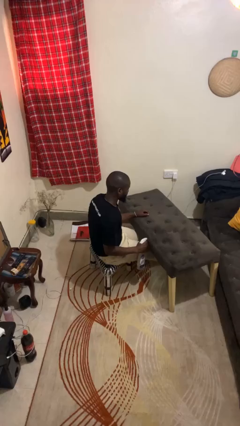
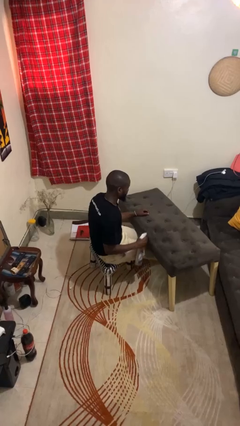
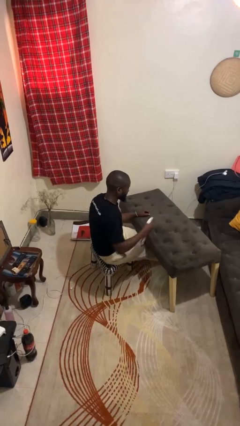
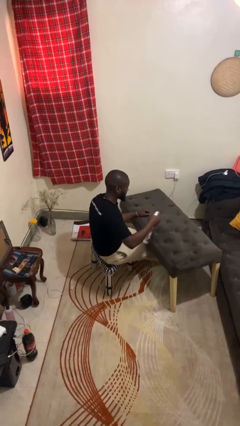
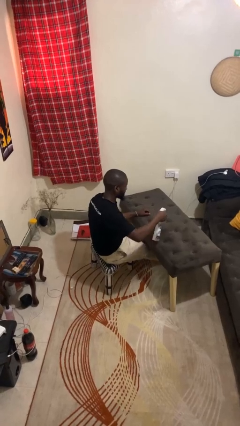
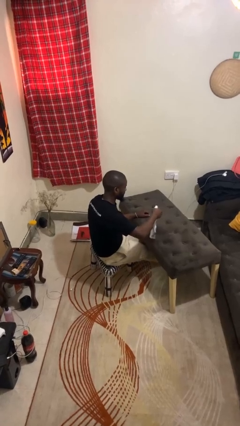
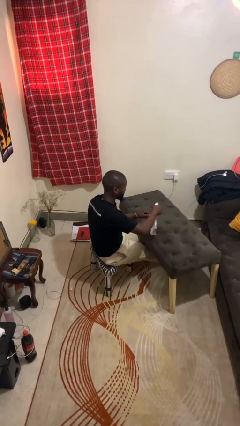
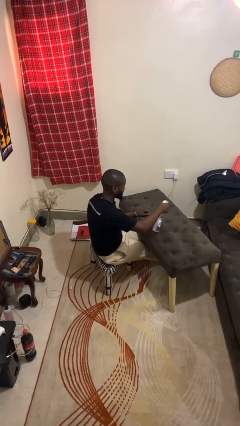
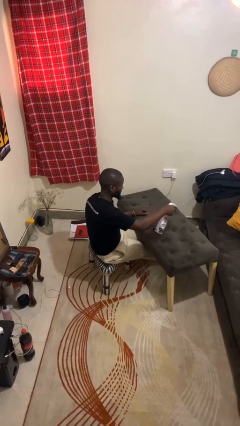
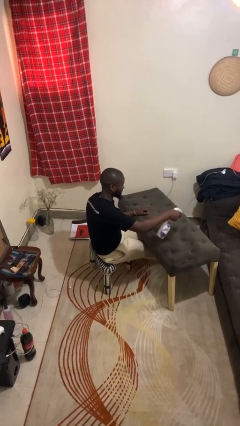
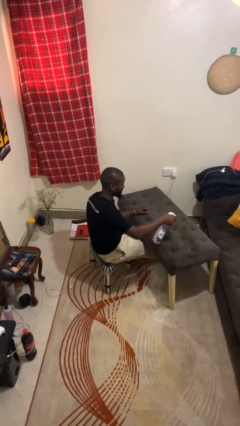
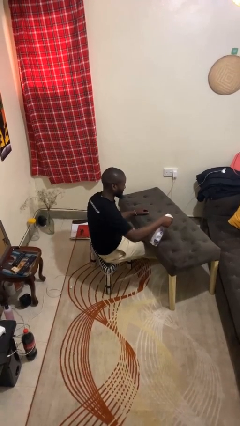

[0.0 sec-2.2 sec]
person sprays from bottle

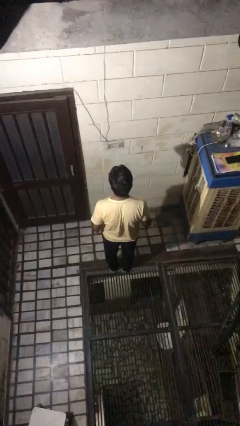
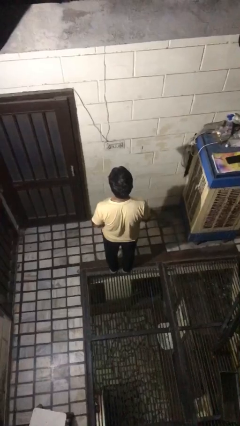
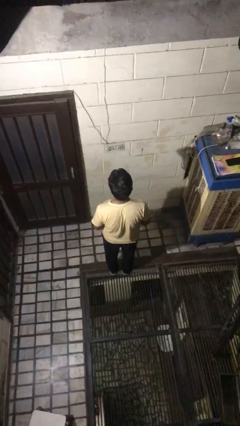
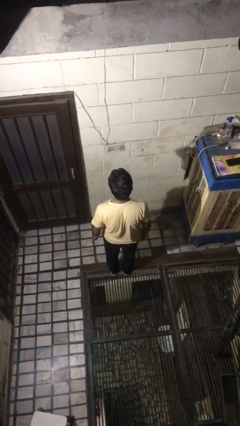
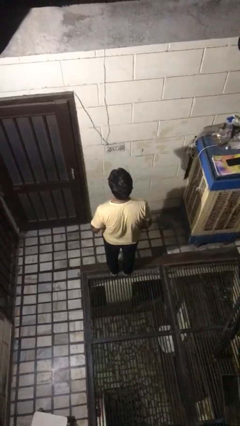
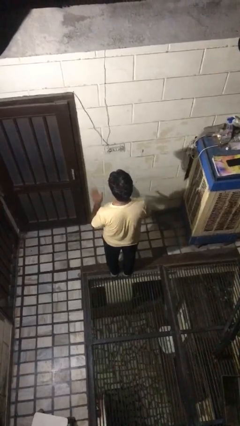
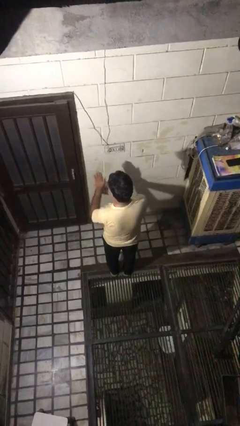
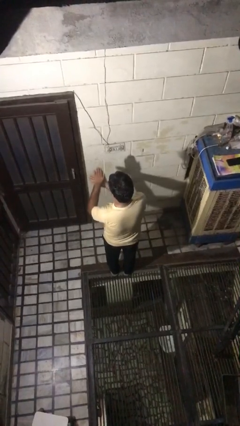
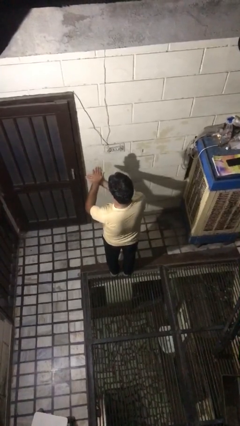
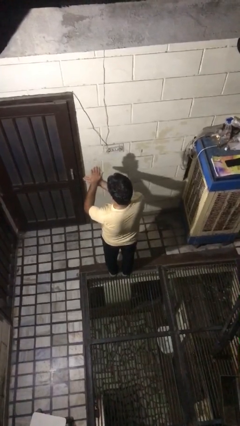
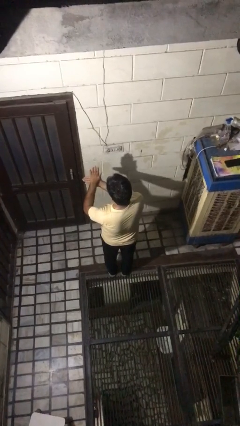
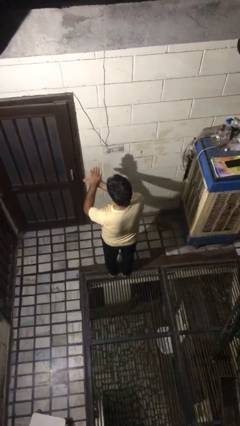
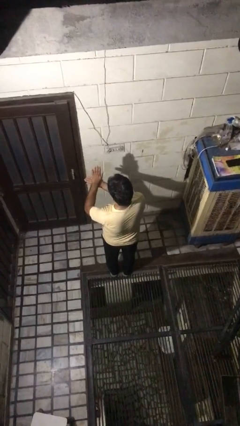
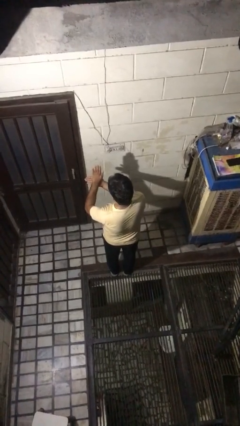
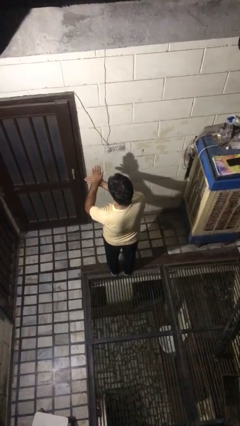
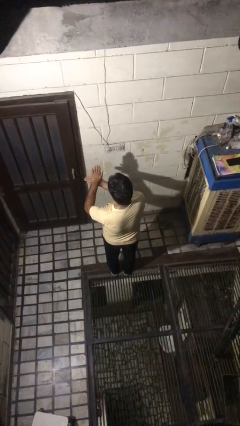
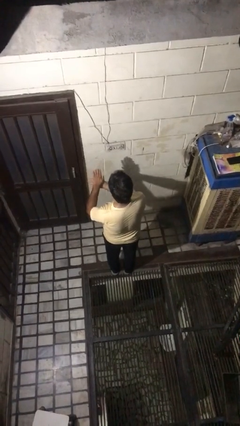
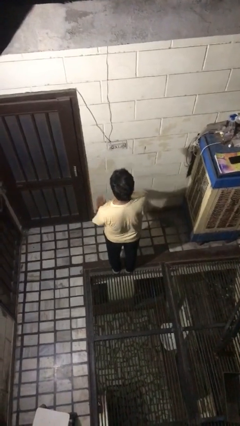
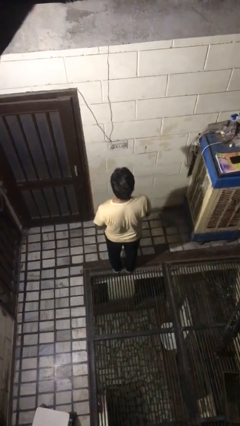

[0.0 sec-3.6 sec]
person gestures number five

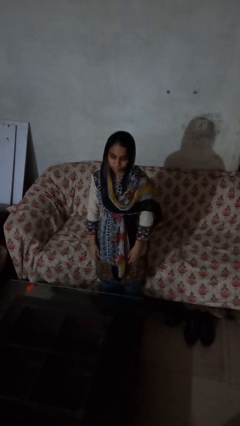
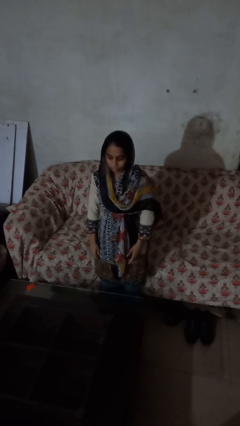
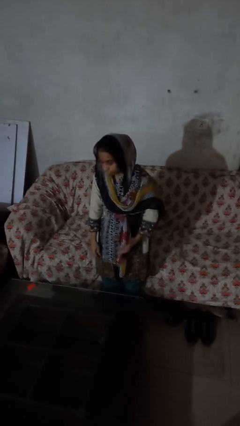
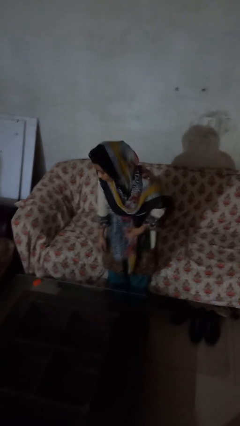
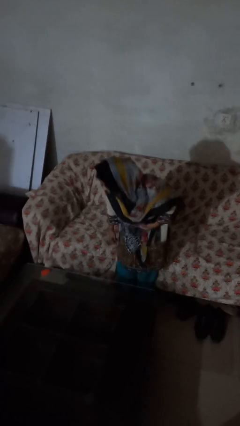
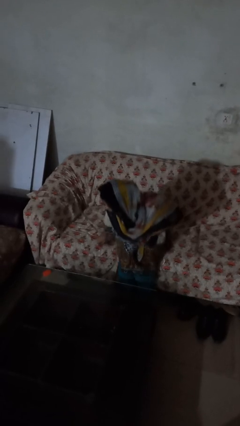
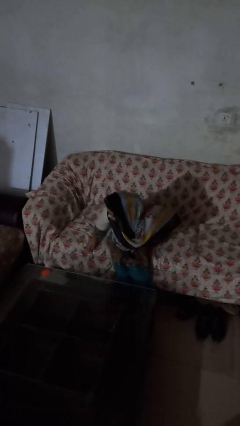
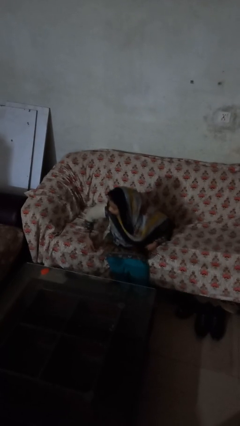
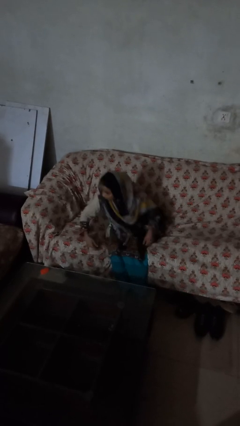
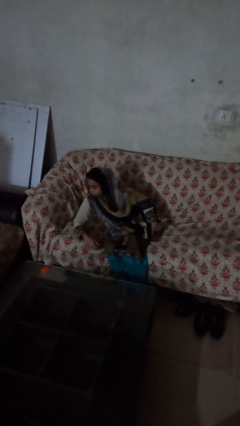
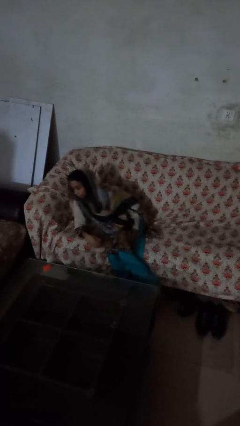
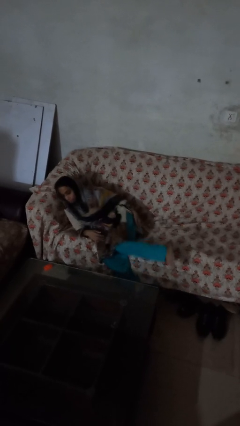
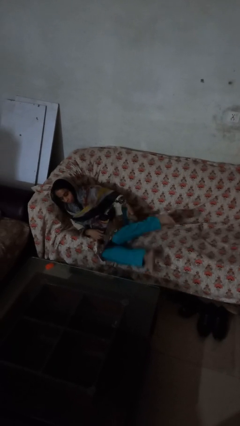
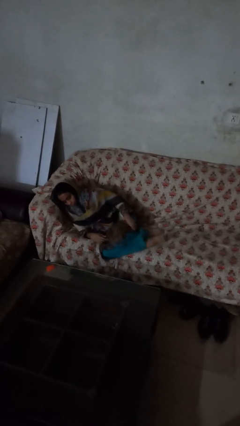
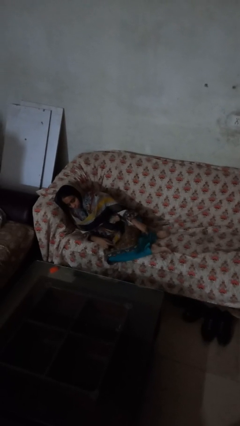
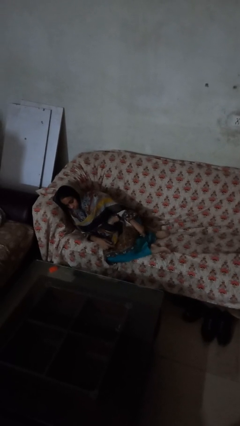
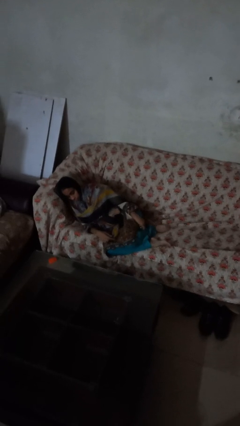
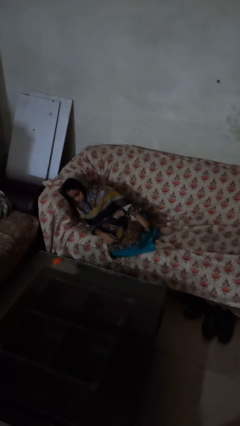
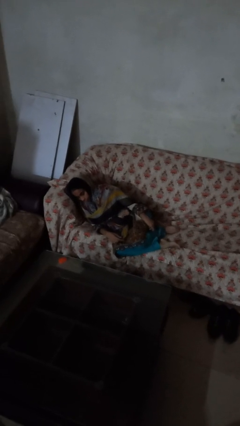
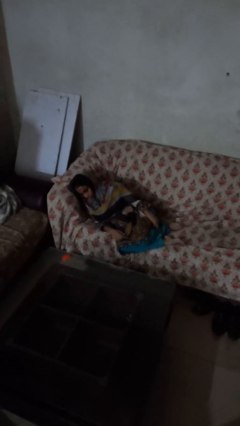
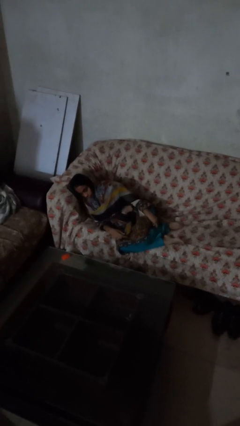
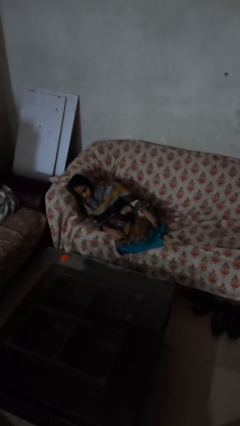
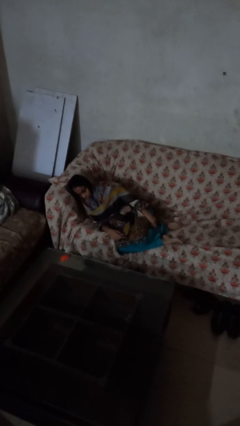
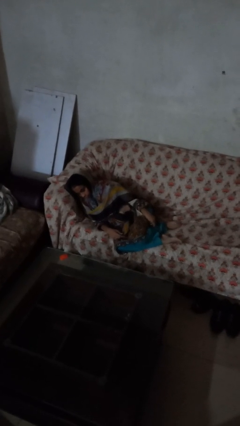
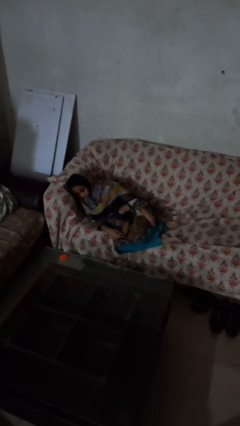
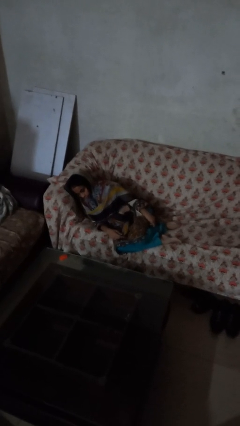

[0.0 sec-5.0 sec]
person lies down on couch

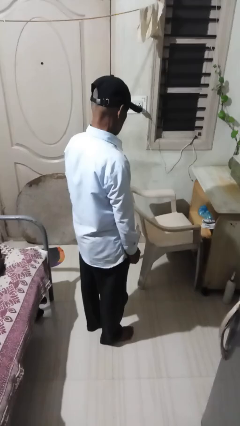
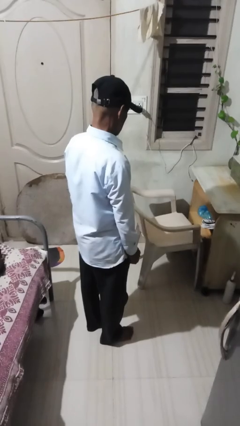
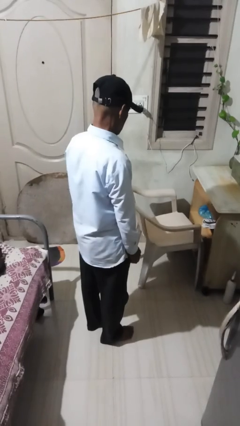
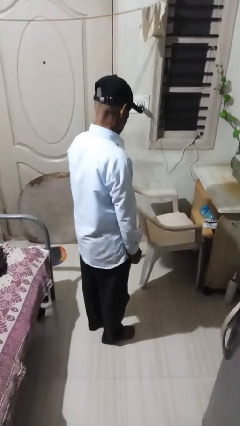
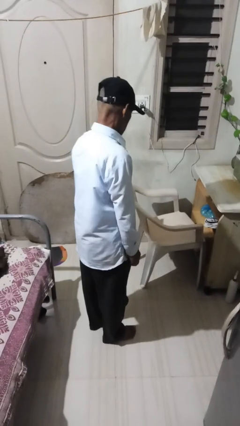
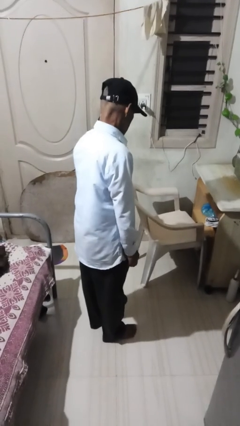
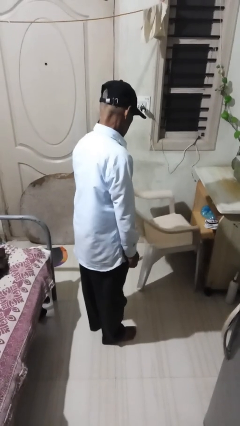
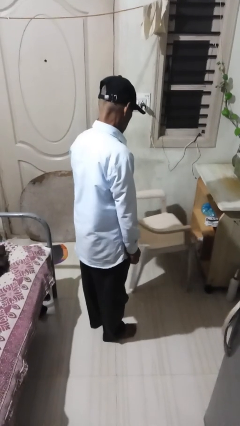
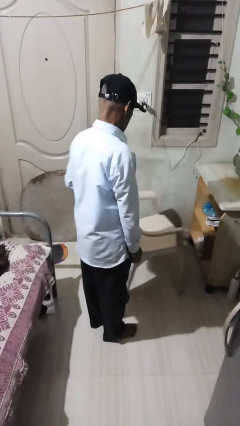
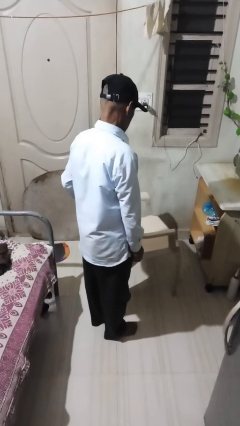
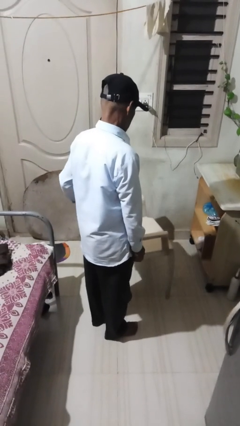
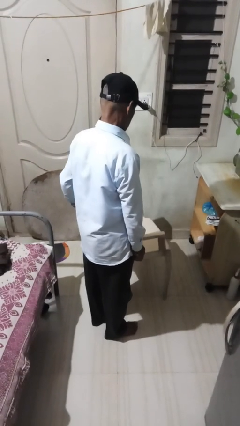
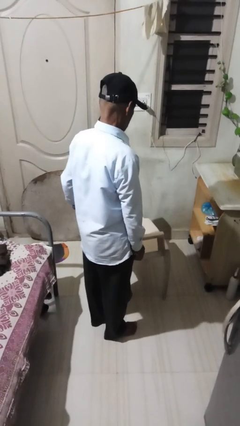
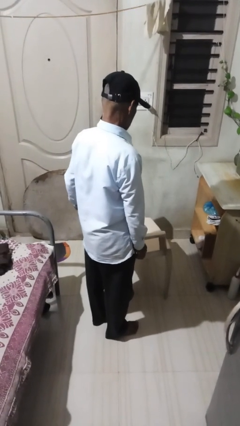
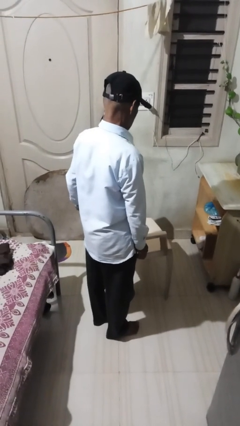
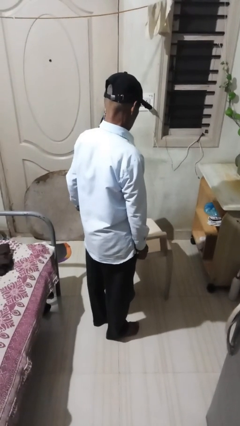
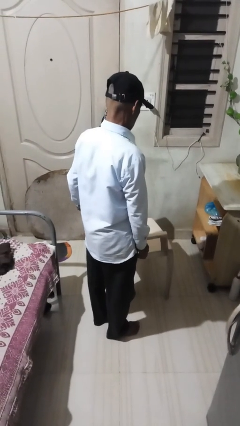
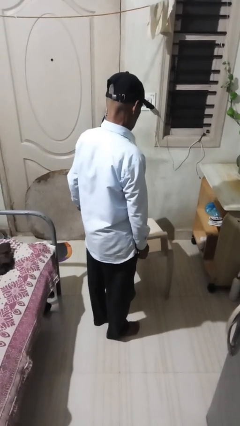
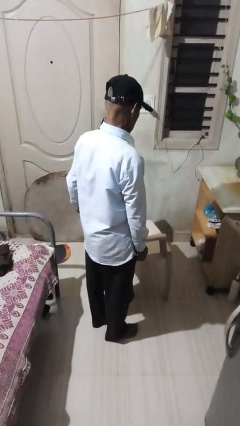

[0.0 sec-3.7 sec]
person pulls out chair

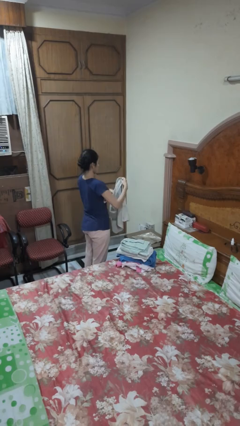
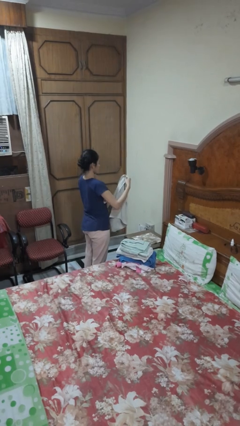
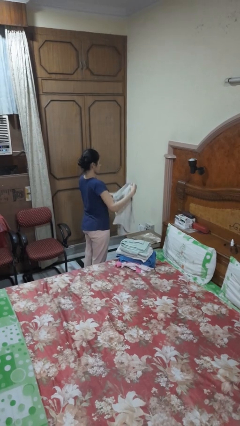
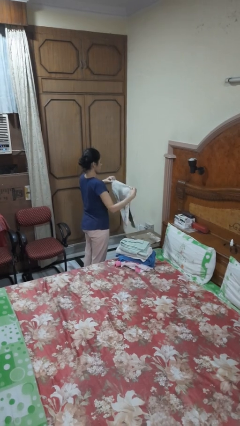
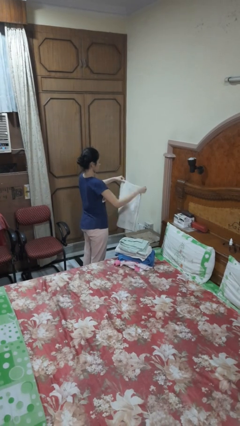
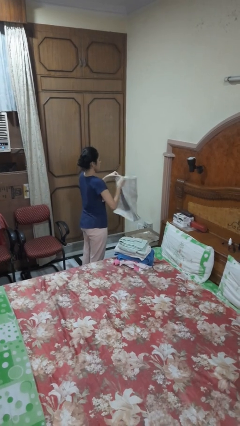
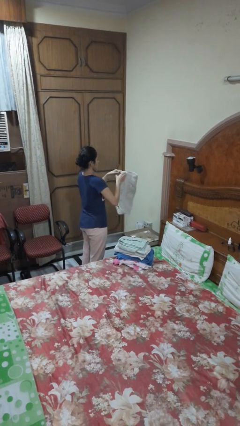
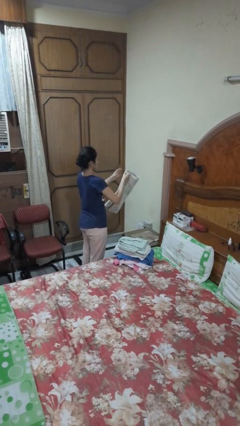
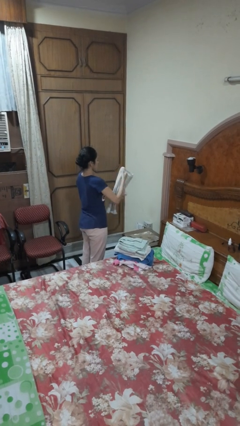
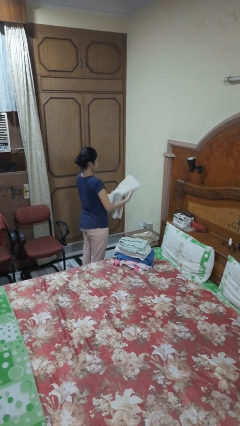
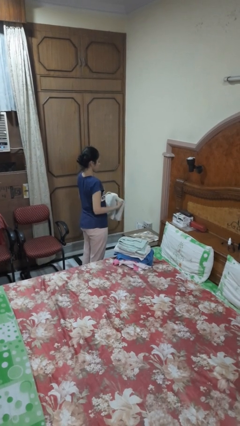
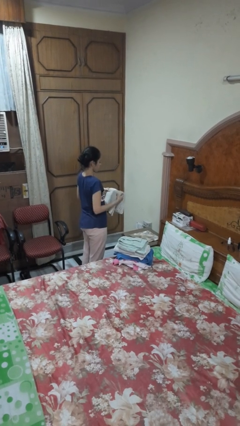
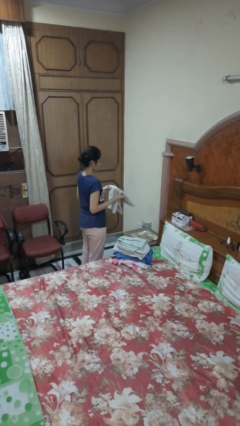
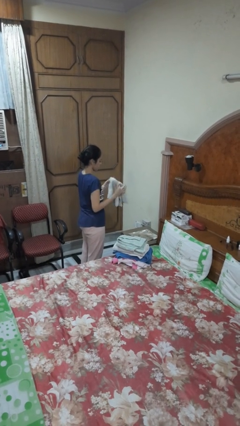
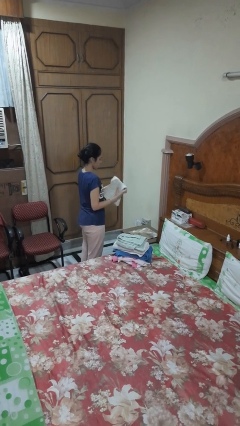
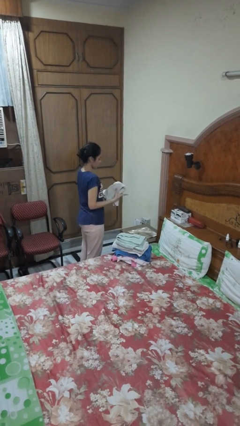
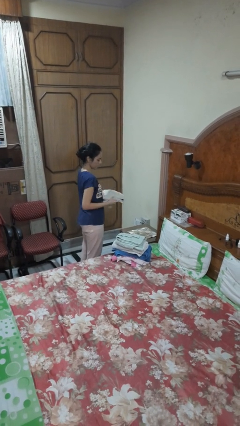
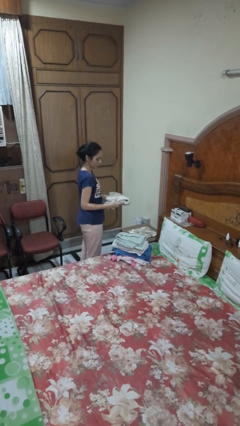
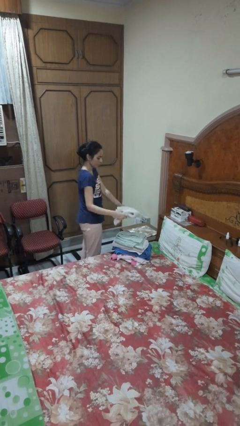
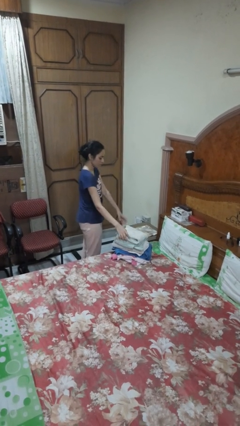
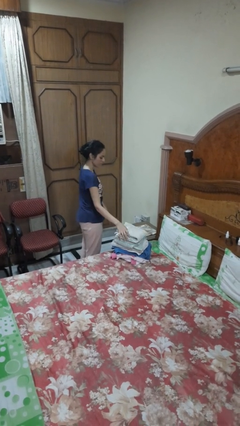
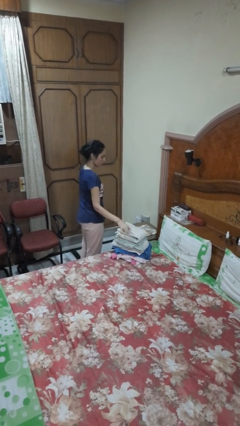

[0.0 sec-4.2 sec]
person folds towel
